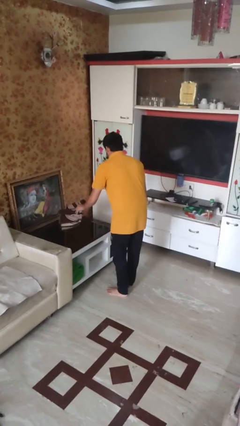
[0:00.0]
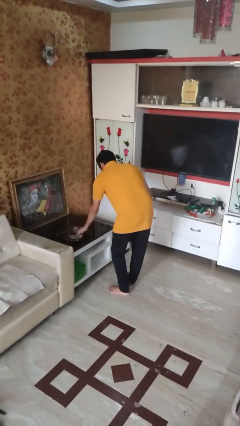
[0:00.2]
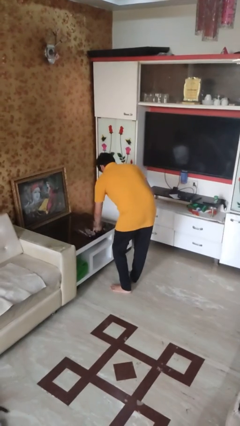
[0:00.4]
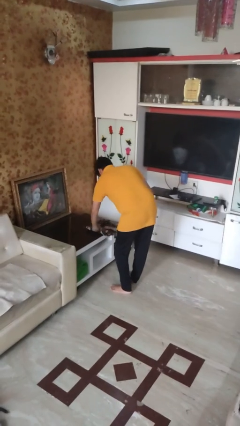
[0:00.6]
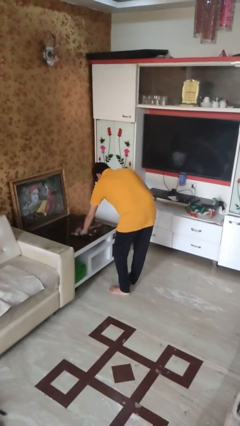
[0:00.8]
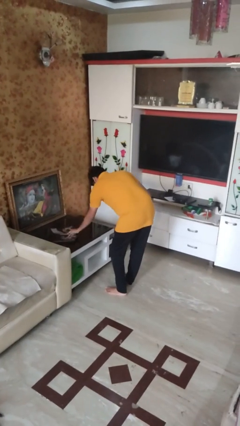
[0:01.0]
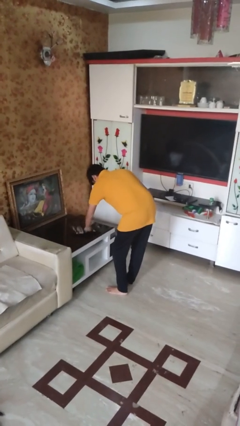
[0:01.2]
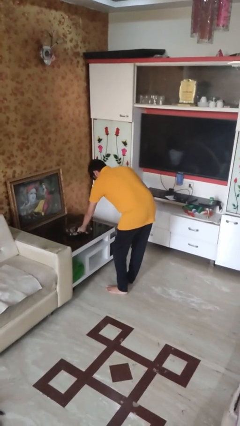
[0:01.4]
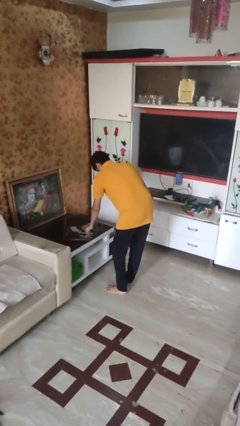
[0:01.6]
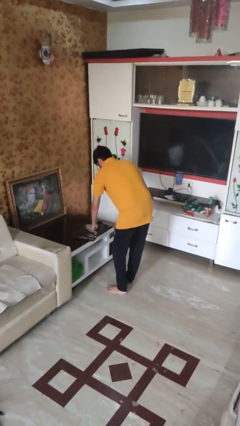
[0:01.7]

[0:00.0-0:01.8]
person cleans table with rag

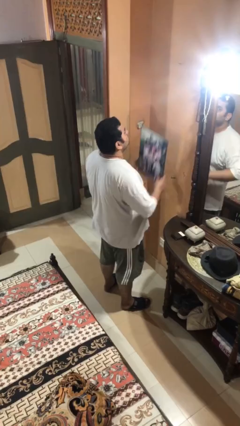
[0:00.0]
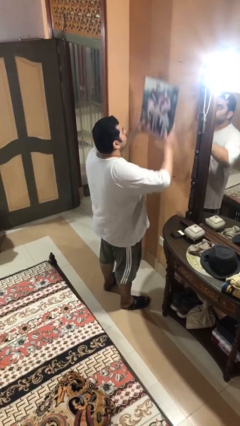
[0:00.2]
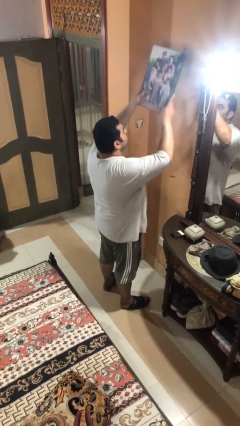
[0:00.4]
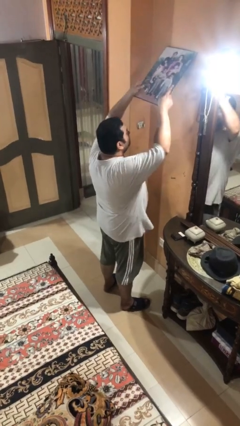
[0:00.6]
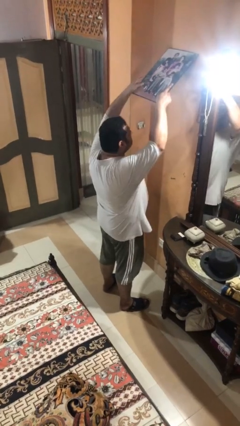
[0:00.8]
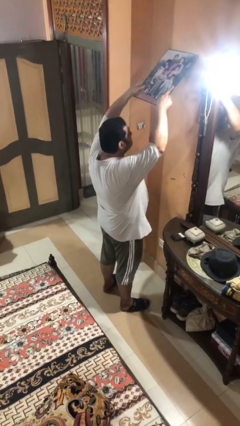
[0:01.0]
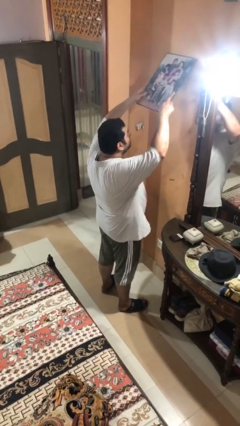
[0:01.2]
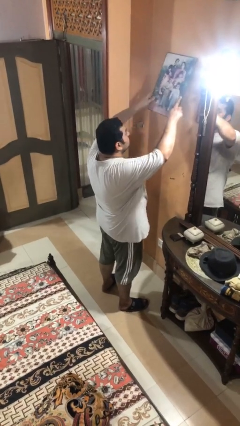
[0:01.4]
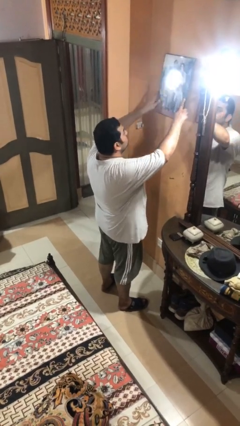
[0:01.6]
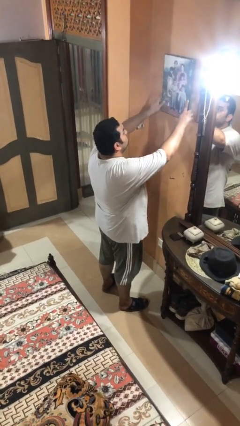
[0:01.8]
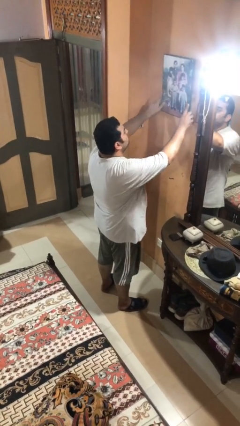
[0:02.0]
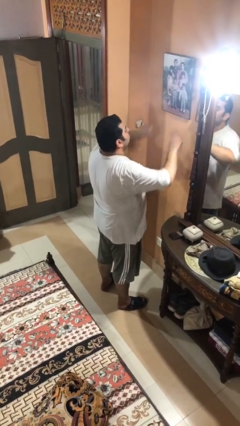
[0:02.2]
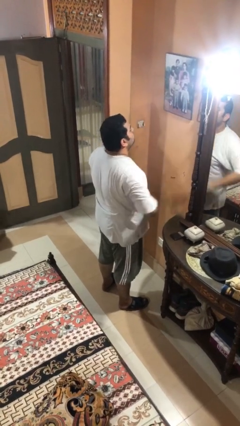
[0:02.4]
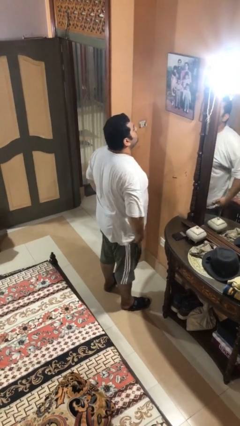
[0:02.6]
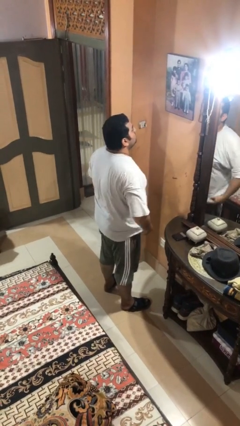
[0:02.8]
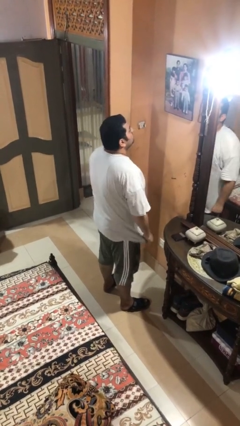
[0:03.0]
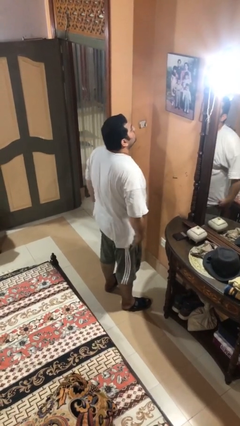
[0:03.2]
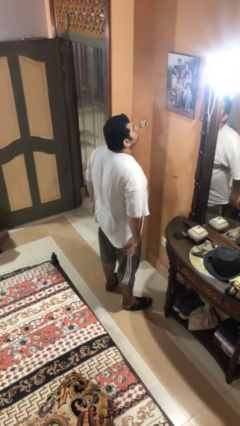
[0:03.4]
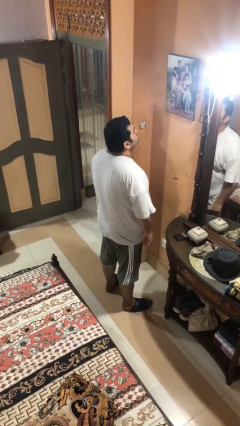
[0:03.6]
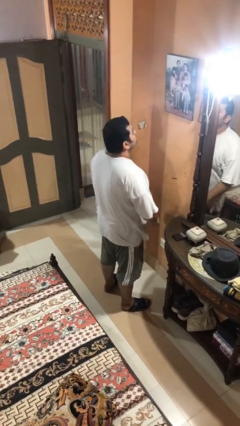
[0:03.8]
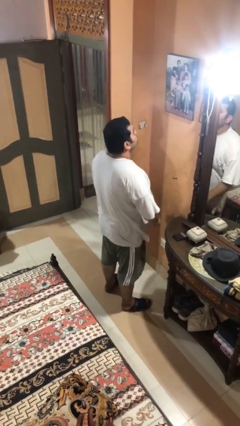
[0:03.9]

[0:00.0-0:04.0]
person puts up picture frame

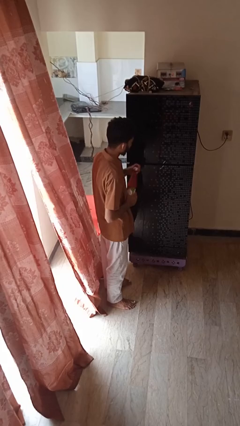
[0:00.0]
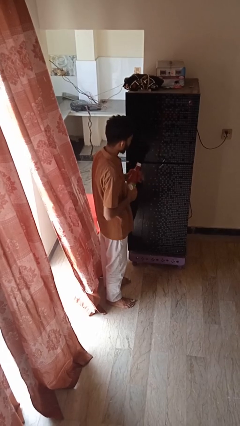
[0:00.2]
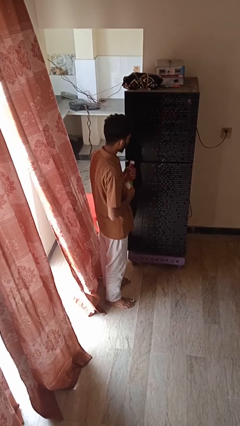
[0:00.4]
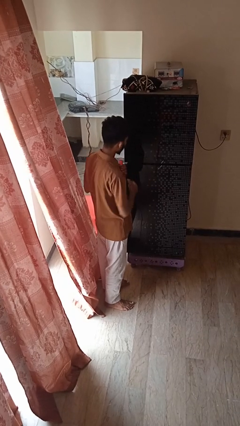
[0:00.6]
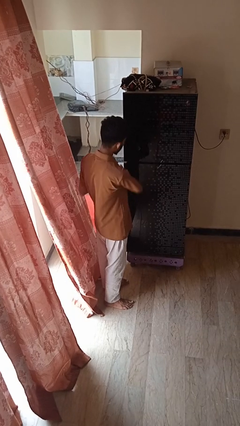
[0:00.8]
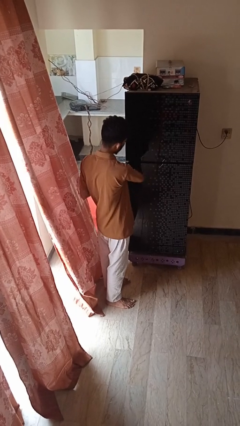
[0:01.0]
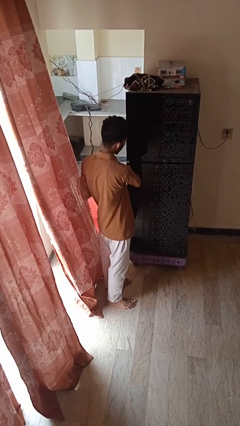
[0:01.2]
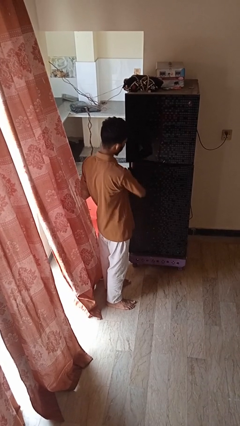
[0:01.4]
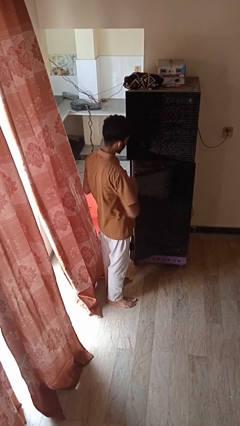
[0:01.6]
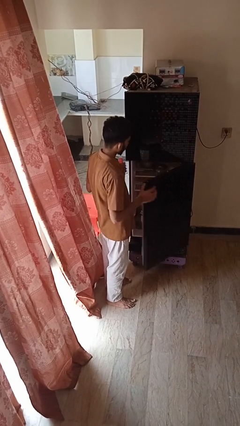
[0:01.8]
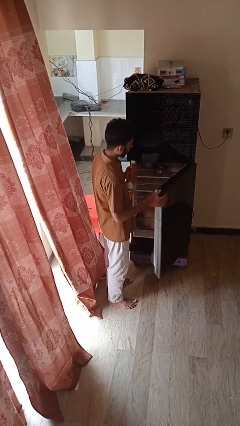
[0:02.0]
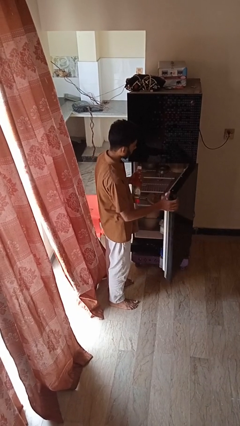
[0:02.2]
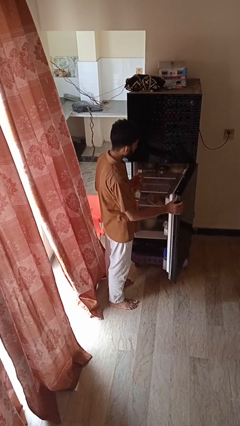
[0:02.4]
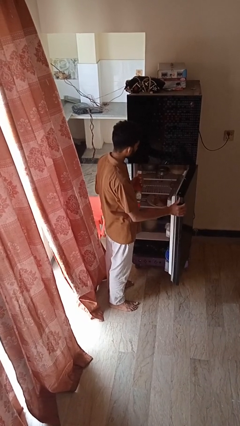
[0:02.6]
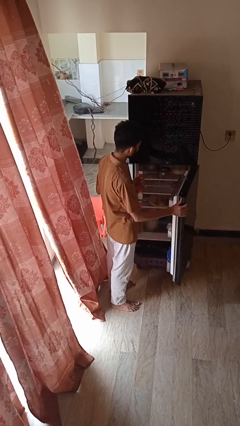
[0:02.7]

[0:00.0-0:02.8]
person opens refrigerator

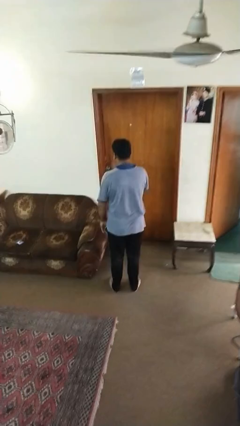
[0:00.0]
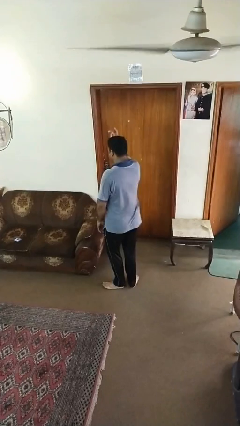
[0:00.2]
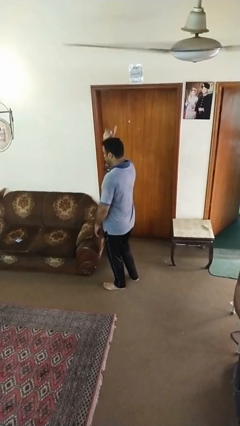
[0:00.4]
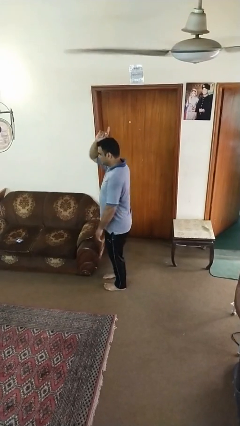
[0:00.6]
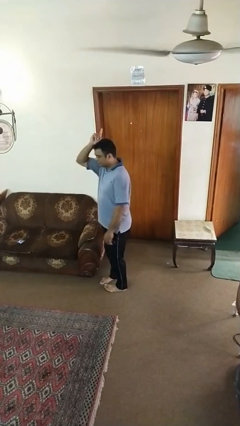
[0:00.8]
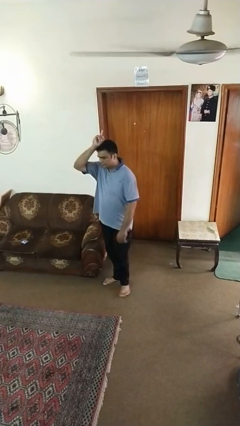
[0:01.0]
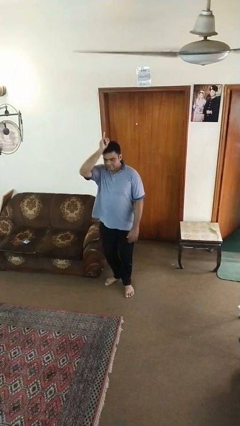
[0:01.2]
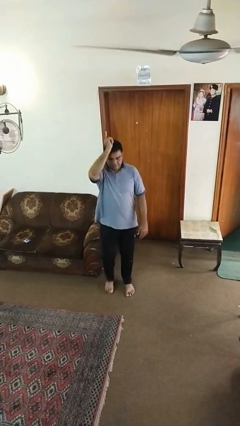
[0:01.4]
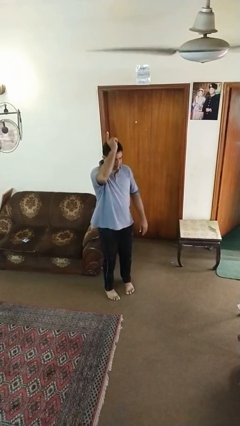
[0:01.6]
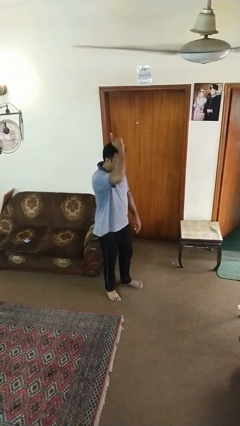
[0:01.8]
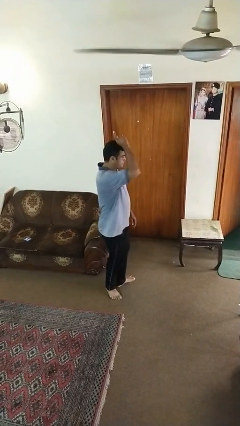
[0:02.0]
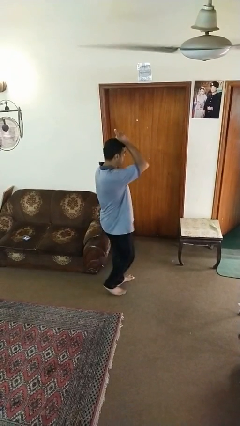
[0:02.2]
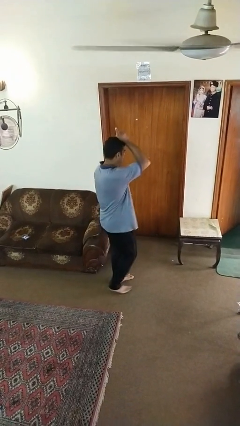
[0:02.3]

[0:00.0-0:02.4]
person twirls

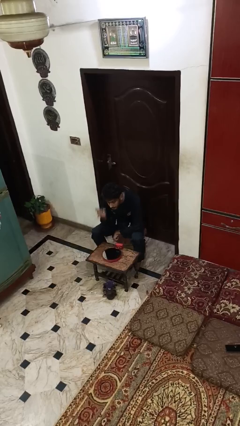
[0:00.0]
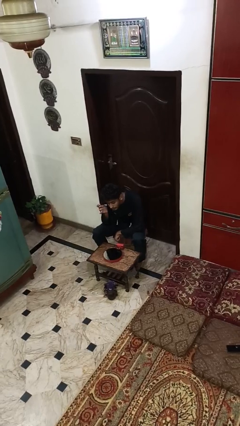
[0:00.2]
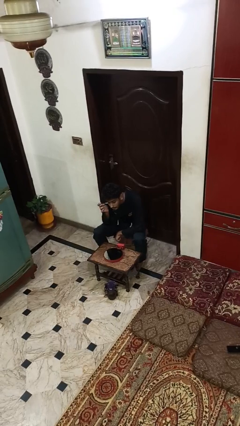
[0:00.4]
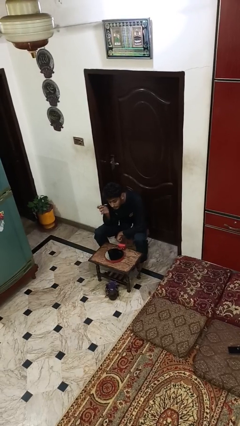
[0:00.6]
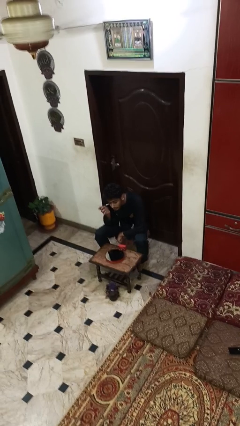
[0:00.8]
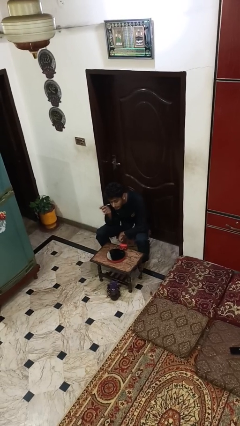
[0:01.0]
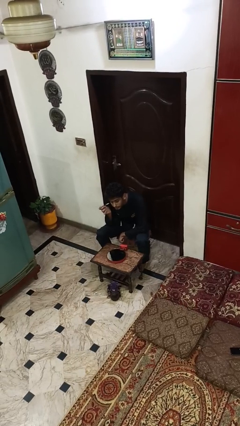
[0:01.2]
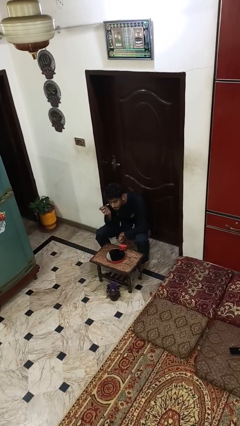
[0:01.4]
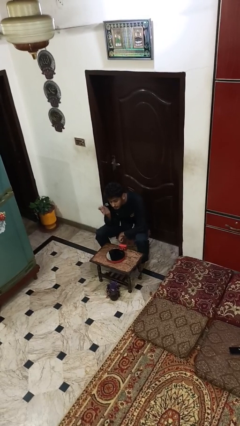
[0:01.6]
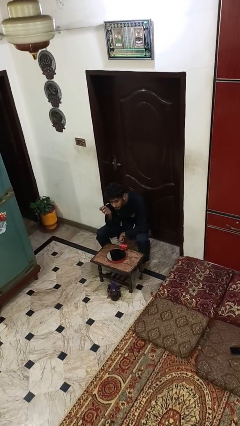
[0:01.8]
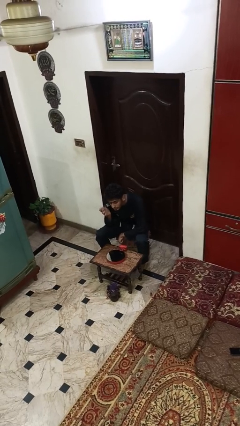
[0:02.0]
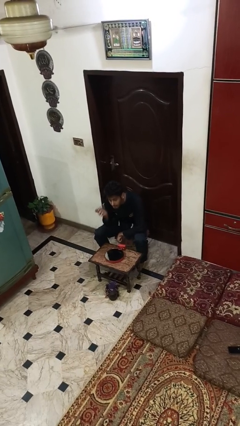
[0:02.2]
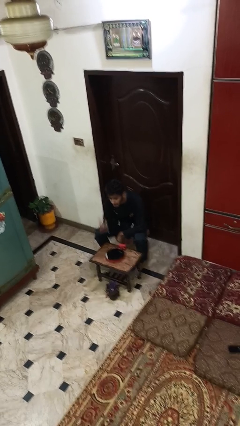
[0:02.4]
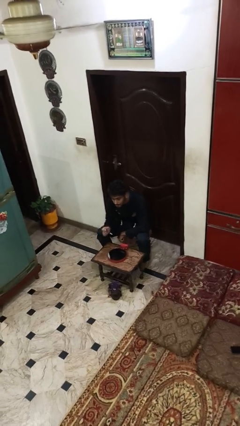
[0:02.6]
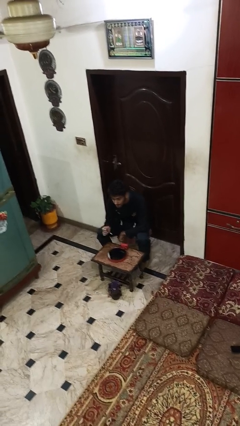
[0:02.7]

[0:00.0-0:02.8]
person applies eye makeup

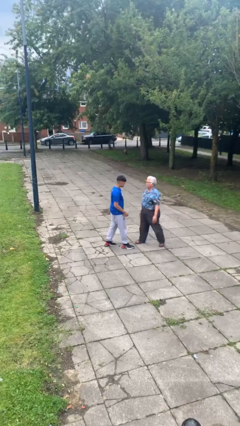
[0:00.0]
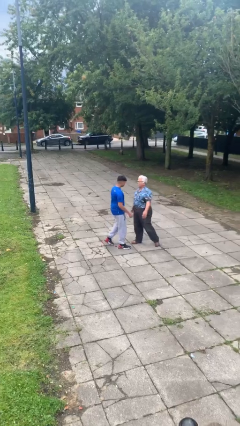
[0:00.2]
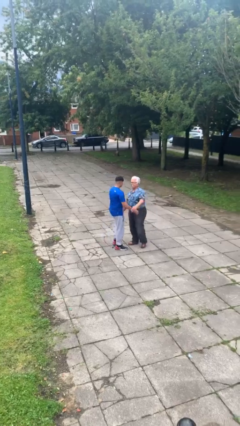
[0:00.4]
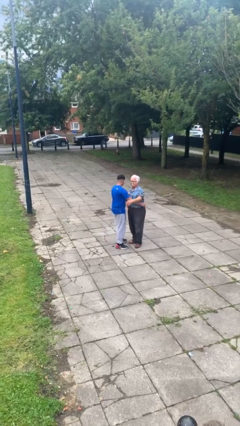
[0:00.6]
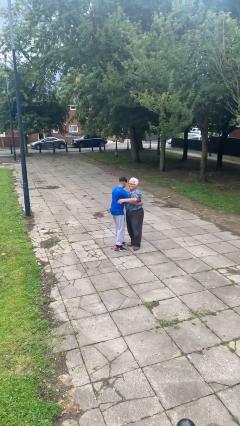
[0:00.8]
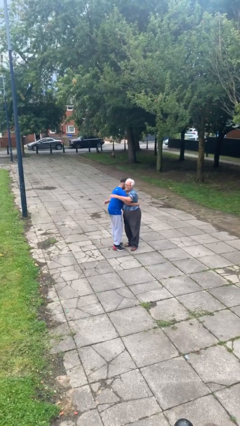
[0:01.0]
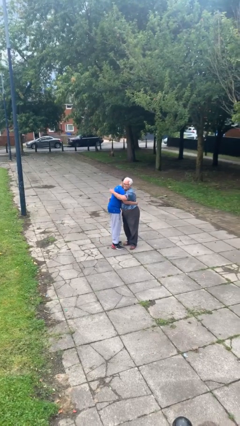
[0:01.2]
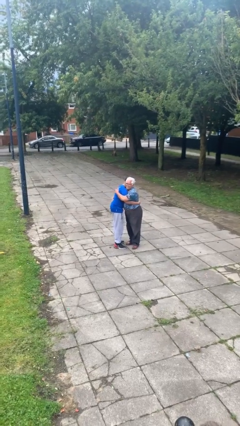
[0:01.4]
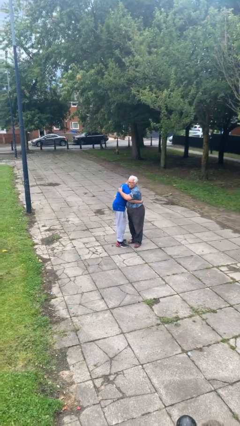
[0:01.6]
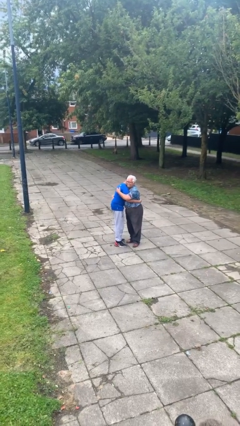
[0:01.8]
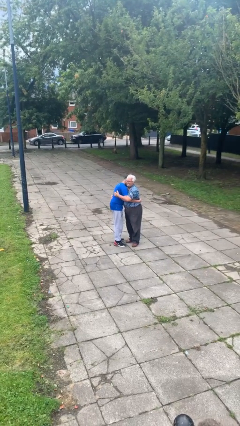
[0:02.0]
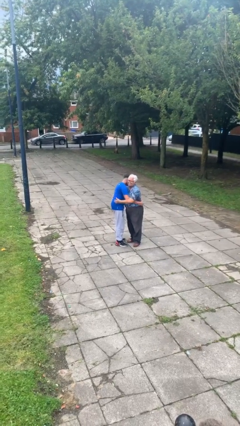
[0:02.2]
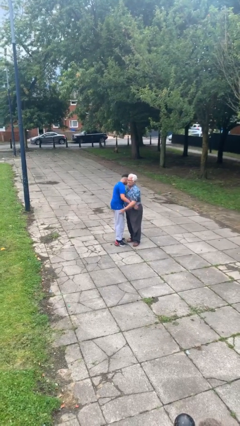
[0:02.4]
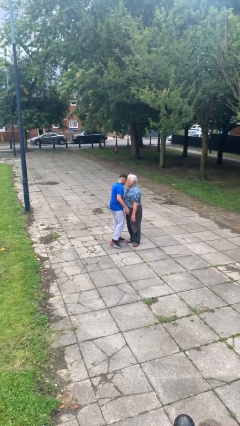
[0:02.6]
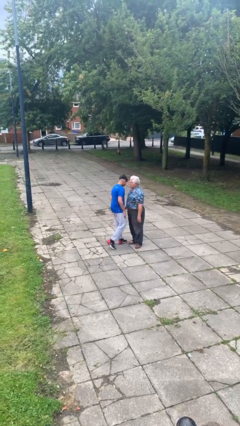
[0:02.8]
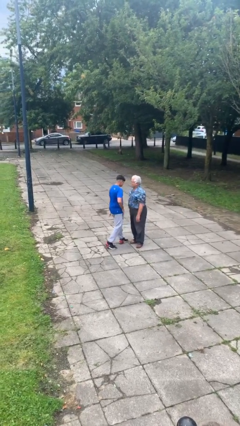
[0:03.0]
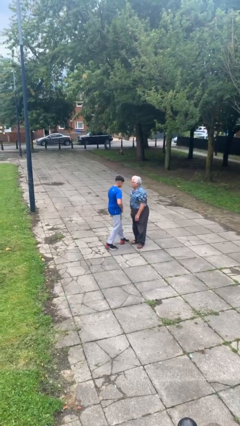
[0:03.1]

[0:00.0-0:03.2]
person embraces person

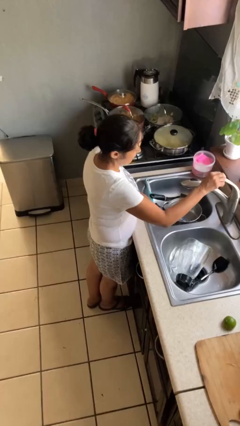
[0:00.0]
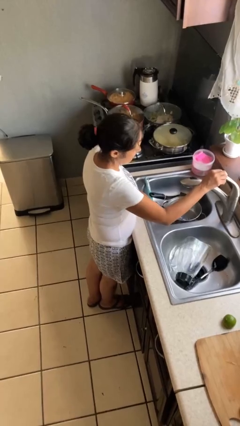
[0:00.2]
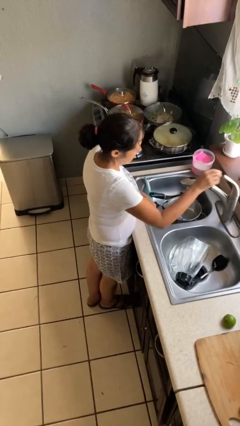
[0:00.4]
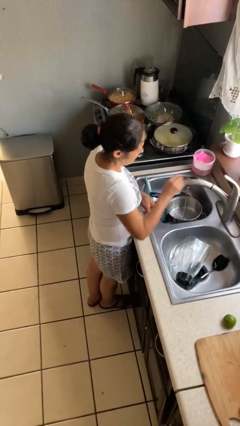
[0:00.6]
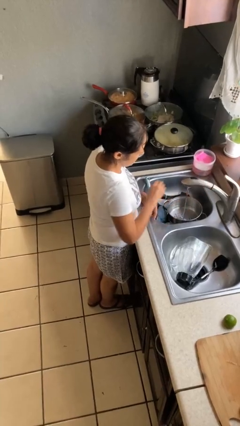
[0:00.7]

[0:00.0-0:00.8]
person turns on faucet
